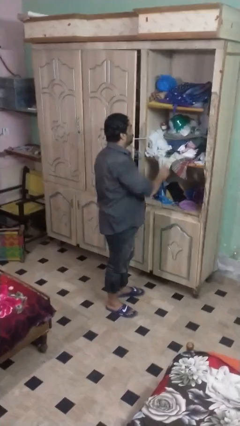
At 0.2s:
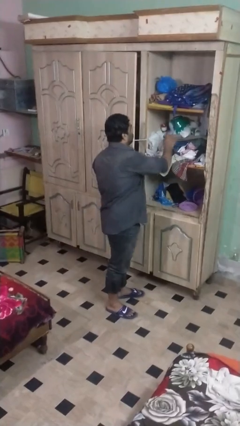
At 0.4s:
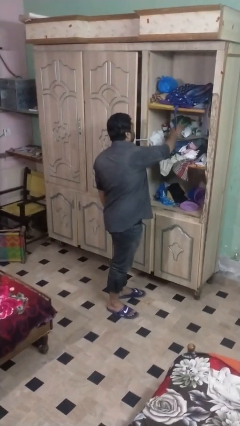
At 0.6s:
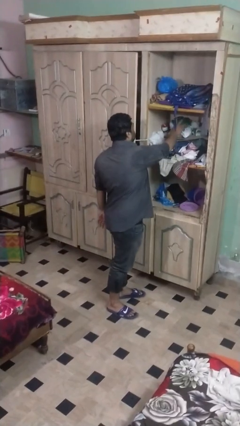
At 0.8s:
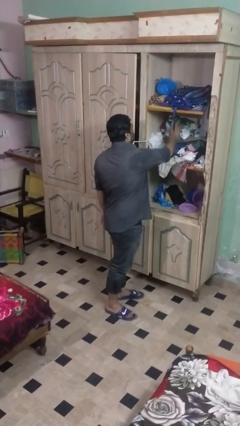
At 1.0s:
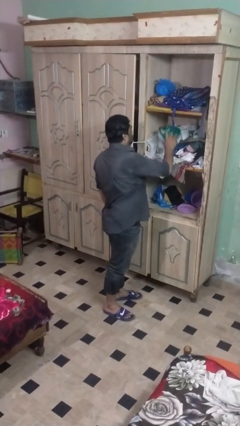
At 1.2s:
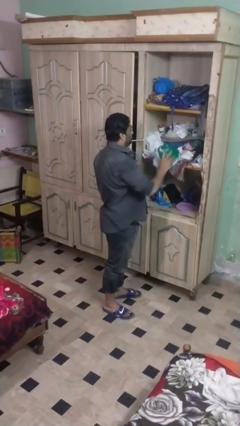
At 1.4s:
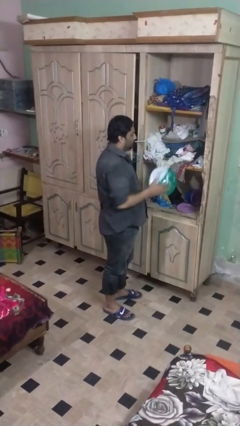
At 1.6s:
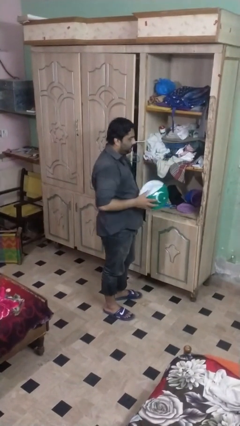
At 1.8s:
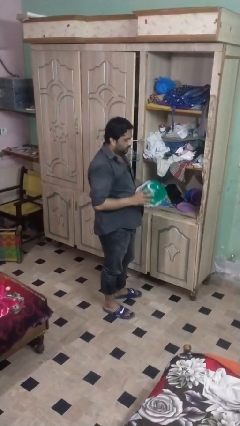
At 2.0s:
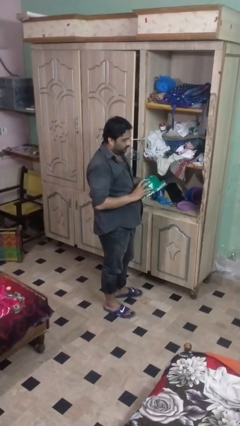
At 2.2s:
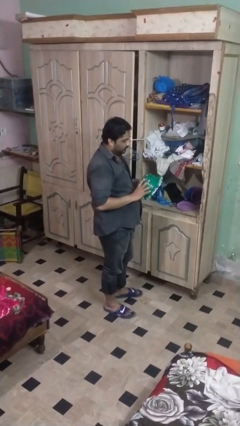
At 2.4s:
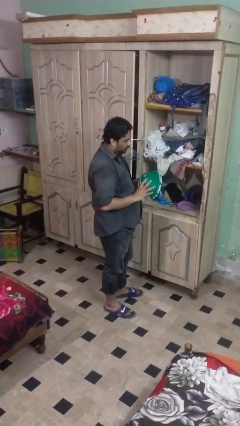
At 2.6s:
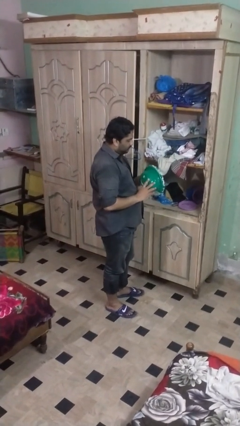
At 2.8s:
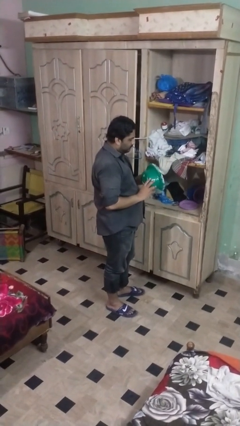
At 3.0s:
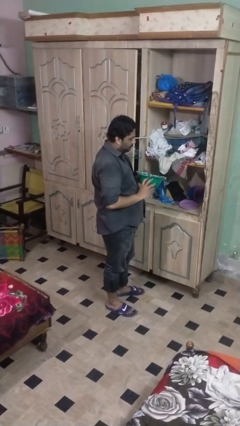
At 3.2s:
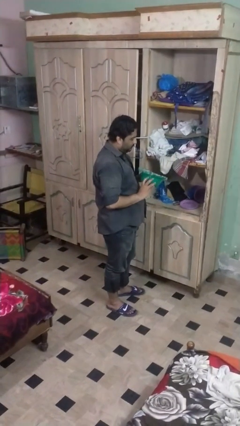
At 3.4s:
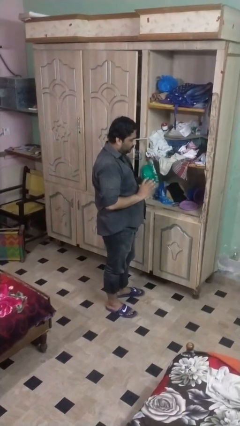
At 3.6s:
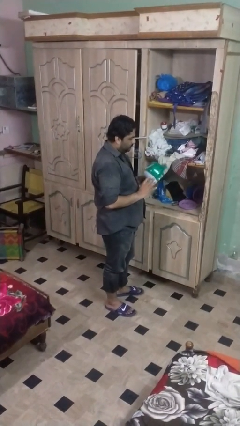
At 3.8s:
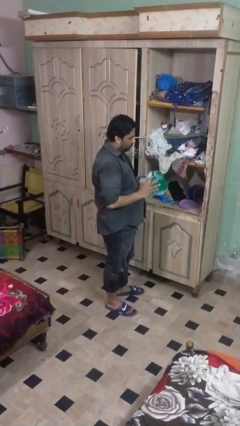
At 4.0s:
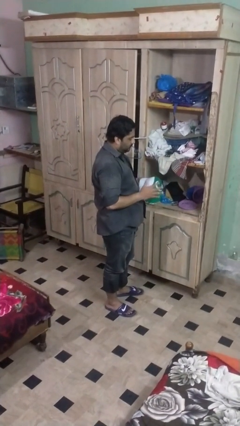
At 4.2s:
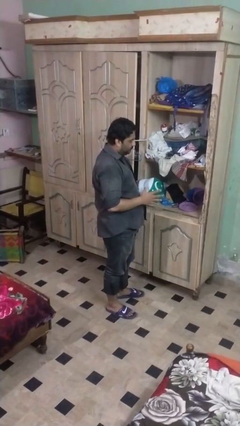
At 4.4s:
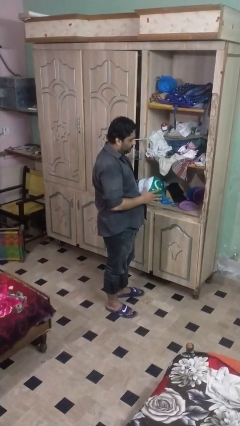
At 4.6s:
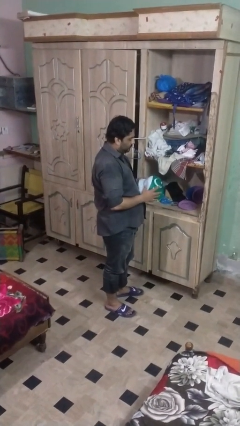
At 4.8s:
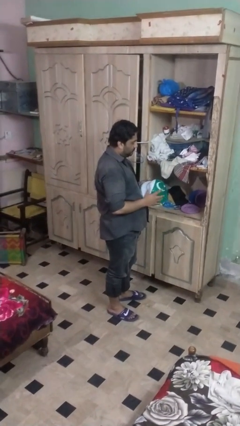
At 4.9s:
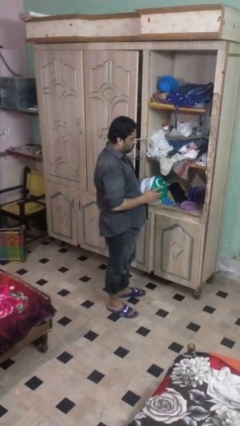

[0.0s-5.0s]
person picks up object from shelf

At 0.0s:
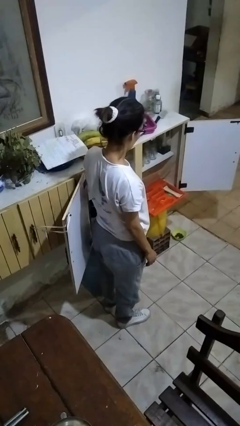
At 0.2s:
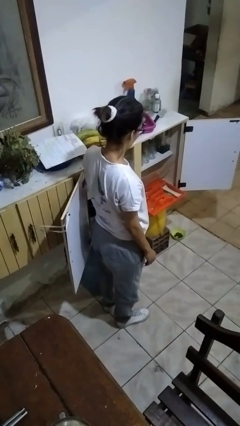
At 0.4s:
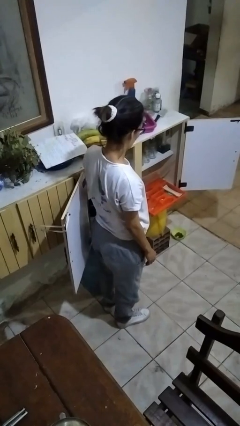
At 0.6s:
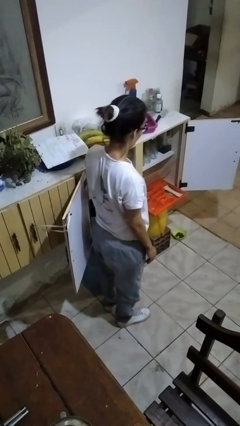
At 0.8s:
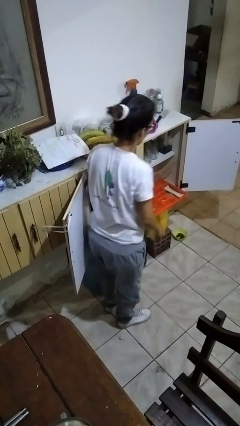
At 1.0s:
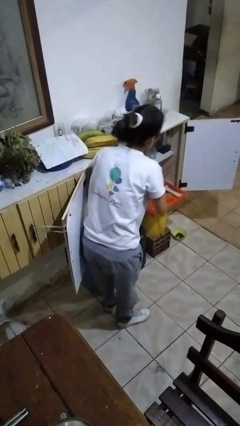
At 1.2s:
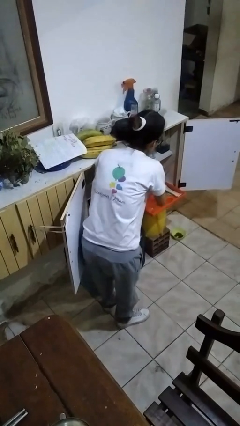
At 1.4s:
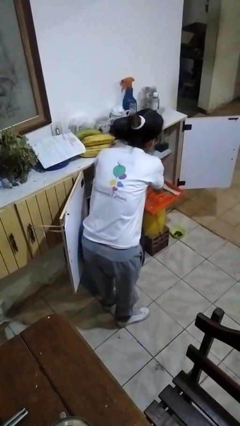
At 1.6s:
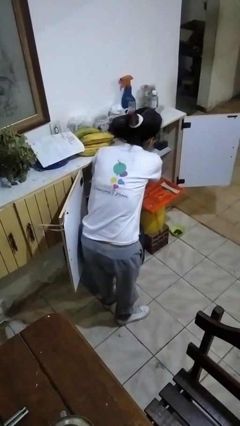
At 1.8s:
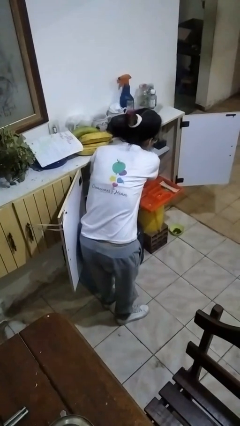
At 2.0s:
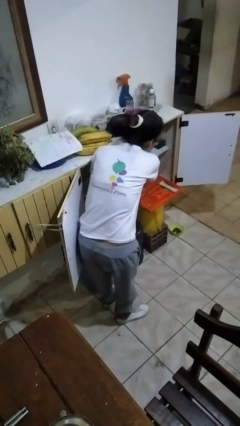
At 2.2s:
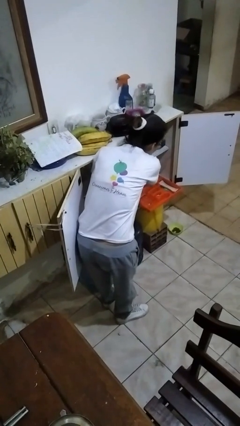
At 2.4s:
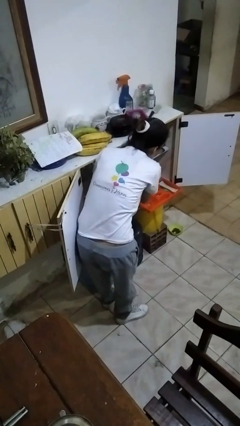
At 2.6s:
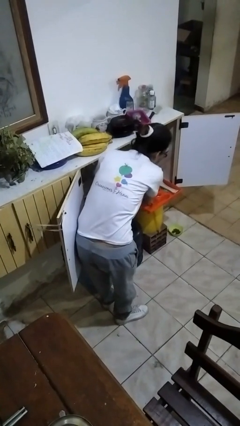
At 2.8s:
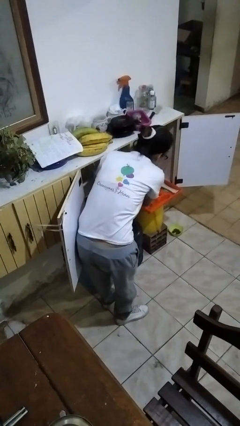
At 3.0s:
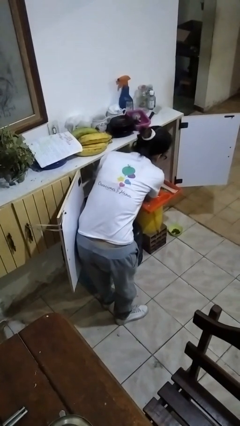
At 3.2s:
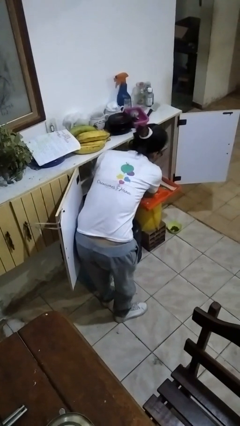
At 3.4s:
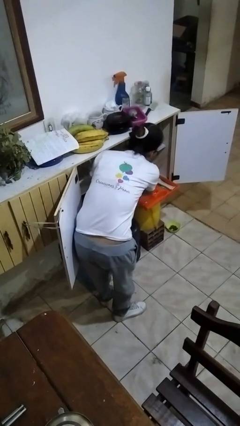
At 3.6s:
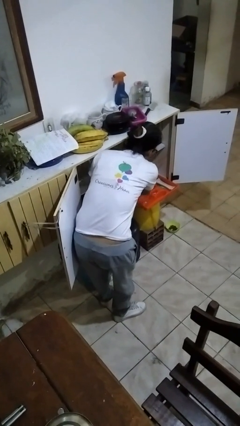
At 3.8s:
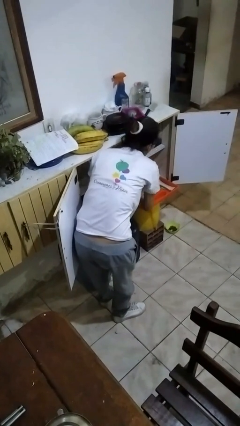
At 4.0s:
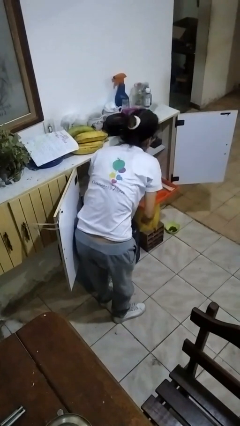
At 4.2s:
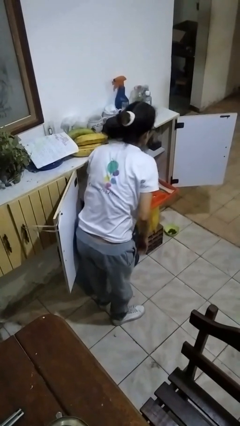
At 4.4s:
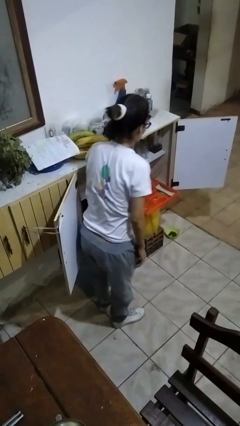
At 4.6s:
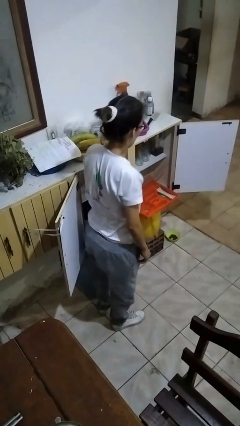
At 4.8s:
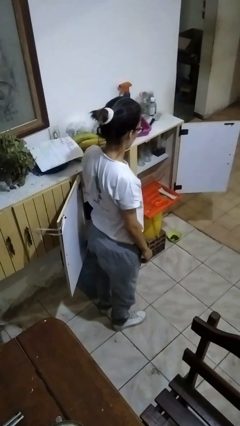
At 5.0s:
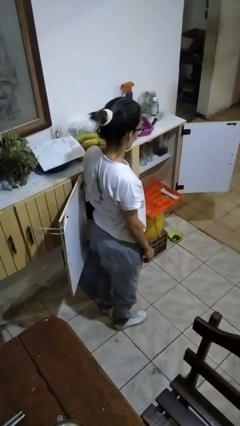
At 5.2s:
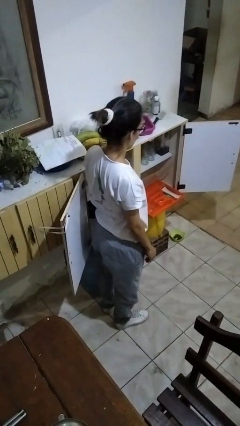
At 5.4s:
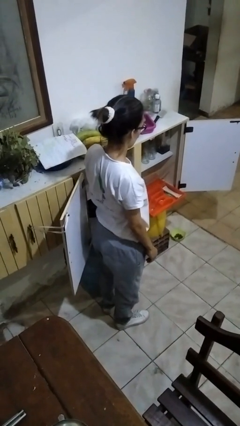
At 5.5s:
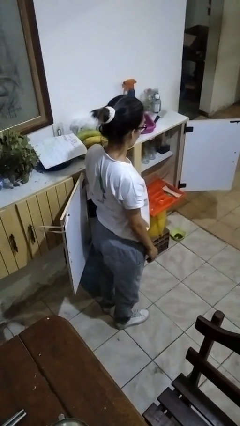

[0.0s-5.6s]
person searches in kitchen drawer

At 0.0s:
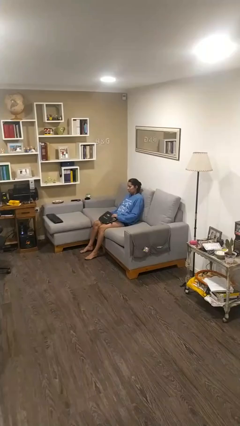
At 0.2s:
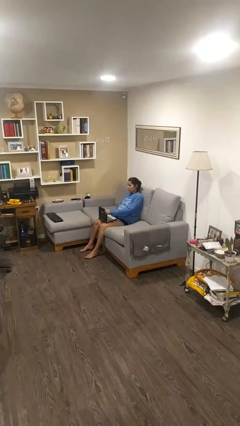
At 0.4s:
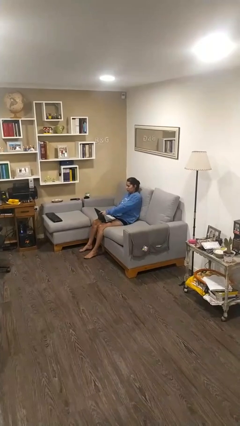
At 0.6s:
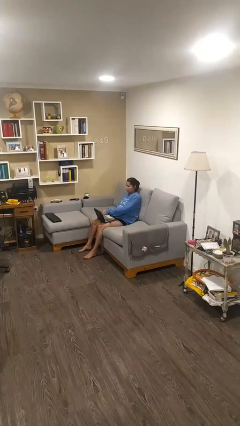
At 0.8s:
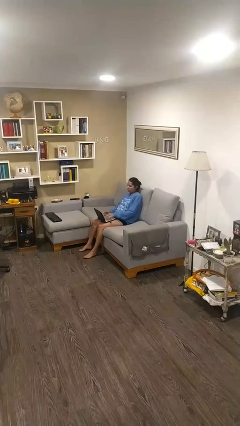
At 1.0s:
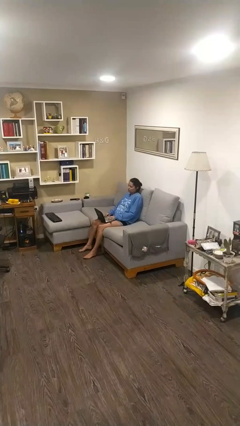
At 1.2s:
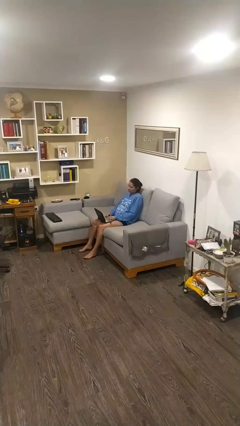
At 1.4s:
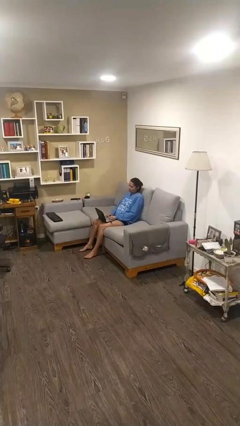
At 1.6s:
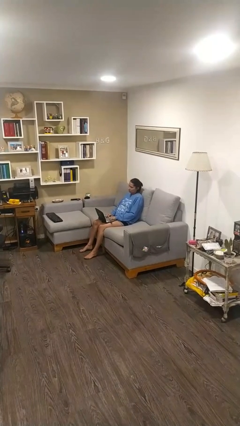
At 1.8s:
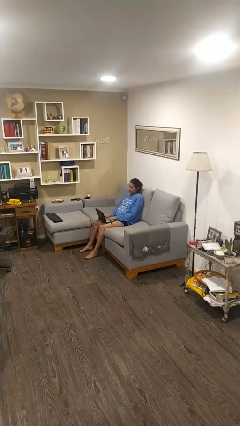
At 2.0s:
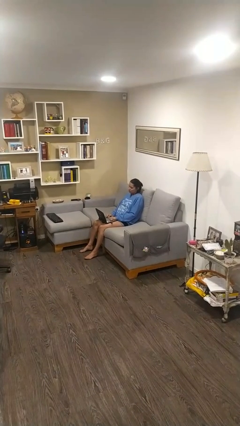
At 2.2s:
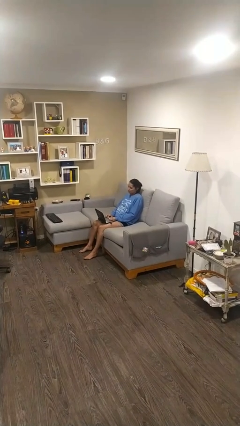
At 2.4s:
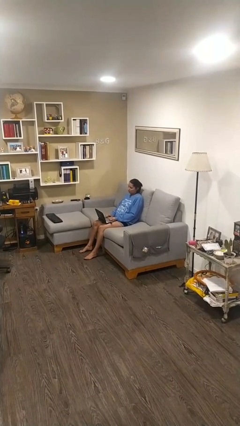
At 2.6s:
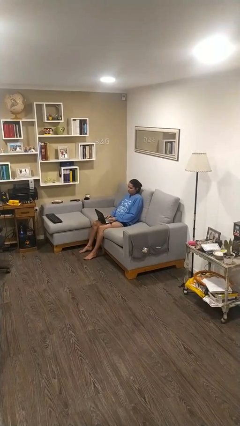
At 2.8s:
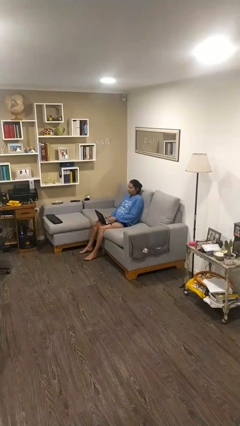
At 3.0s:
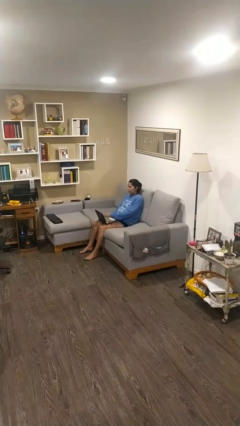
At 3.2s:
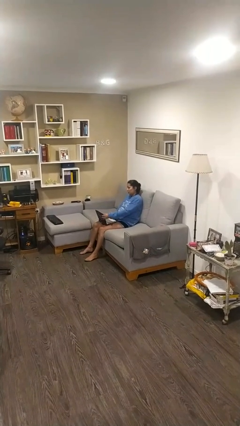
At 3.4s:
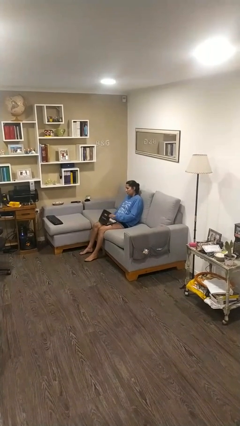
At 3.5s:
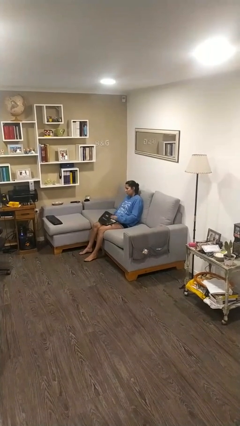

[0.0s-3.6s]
person interacts with laptop

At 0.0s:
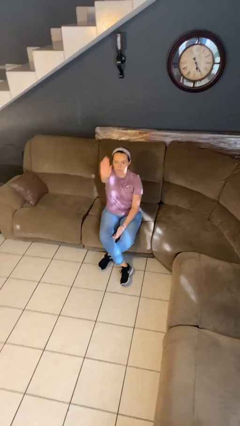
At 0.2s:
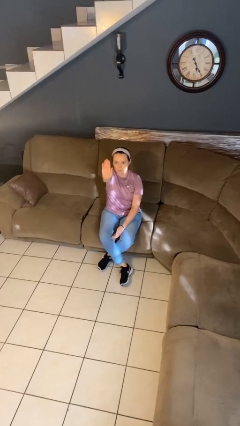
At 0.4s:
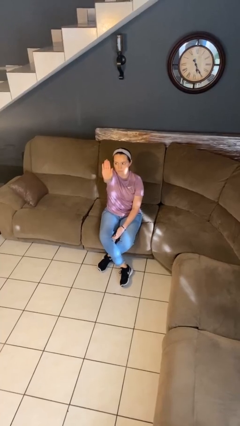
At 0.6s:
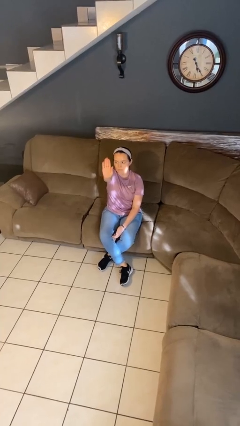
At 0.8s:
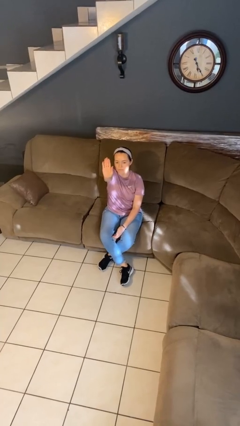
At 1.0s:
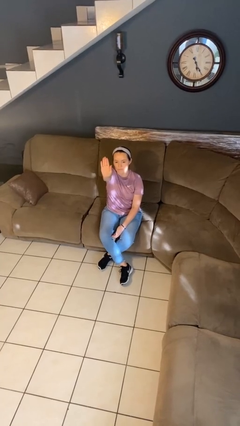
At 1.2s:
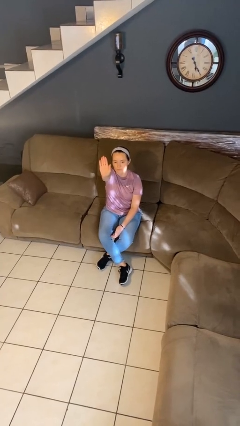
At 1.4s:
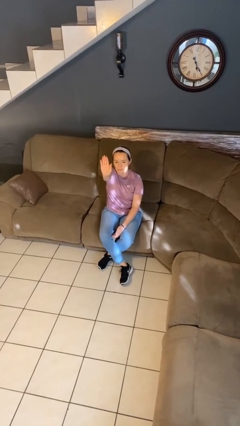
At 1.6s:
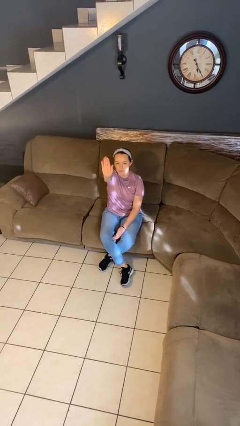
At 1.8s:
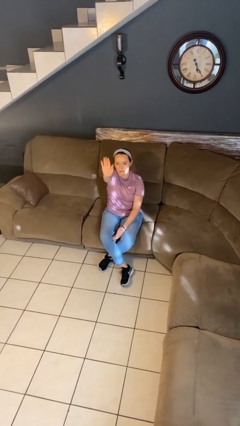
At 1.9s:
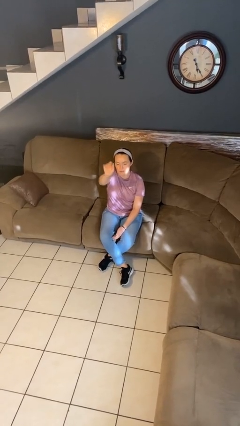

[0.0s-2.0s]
person gestures stop

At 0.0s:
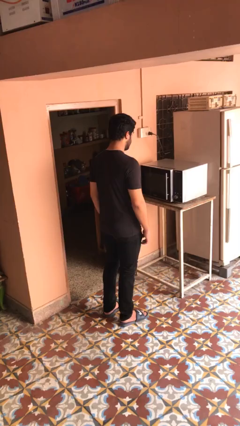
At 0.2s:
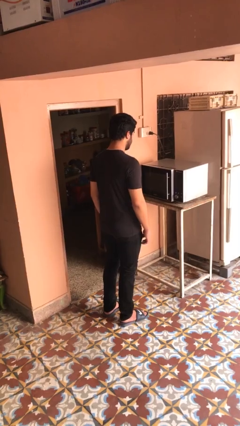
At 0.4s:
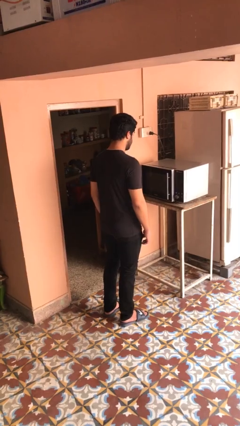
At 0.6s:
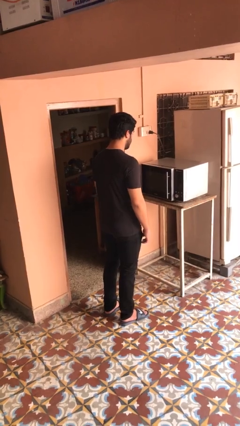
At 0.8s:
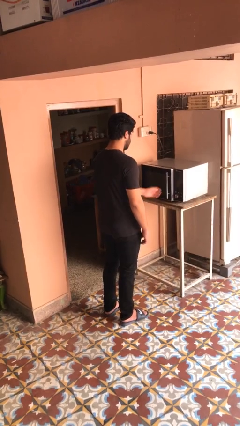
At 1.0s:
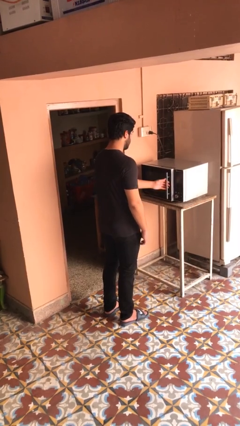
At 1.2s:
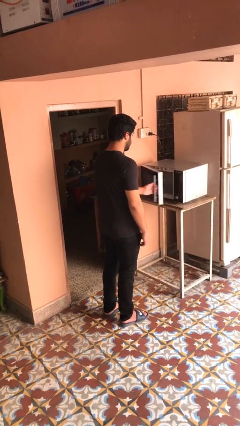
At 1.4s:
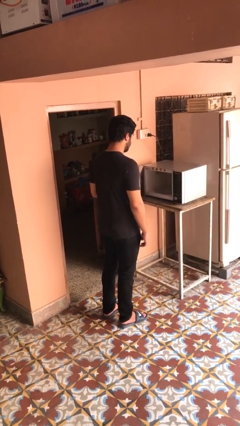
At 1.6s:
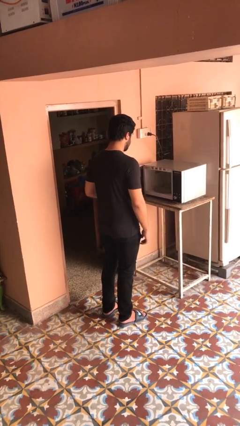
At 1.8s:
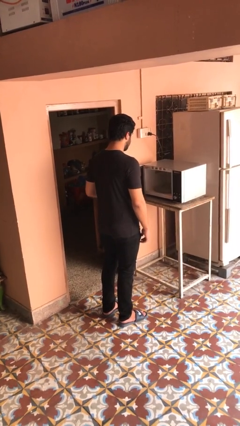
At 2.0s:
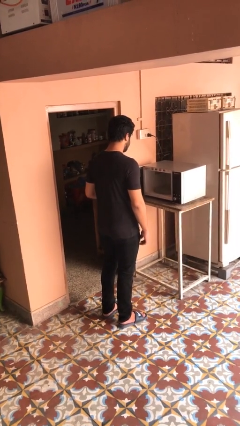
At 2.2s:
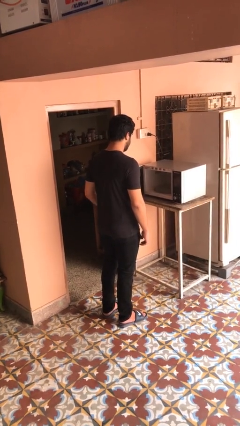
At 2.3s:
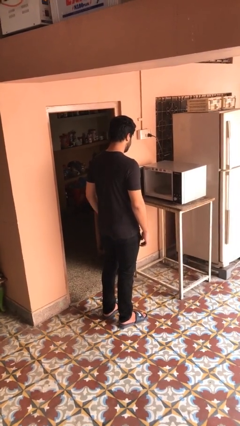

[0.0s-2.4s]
person opens microwave
